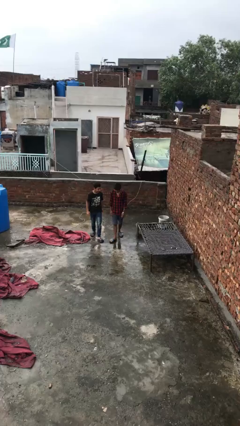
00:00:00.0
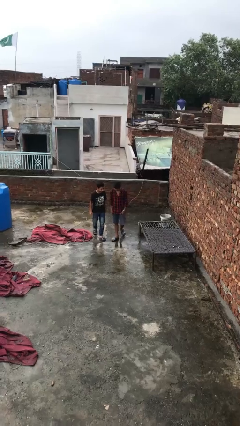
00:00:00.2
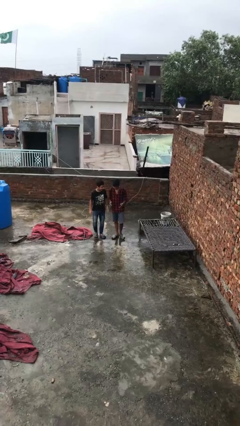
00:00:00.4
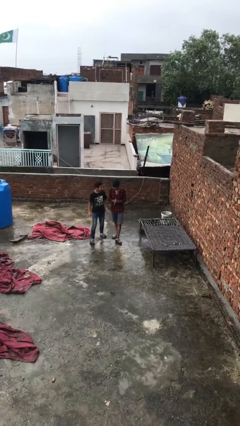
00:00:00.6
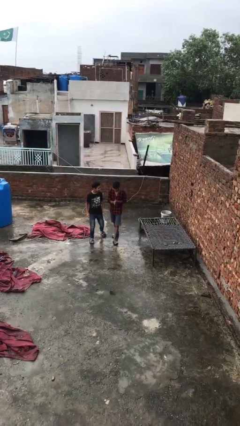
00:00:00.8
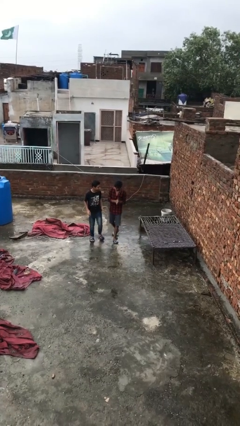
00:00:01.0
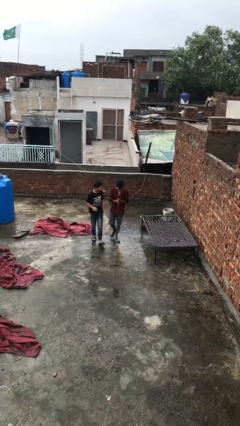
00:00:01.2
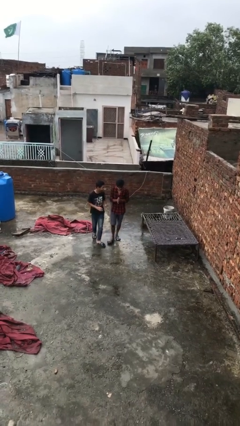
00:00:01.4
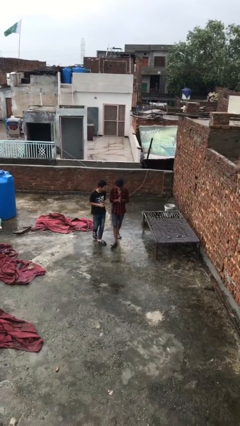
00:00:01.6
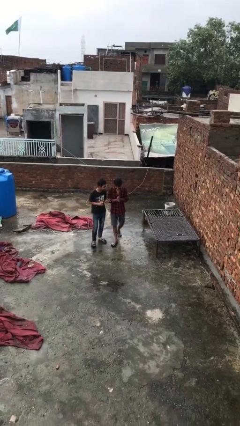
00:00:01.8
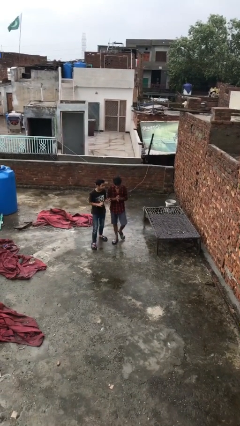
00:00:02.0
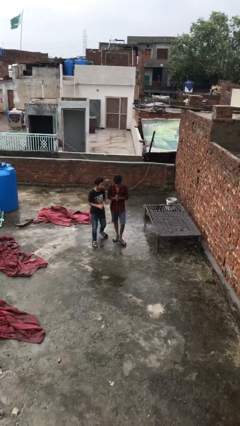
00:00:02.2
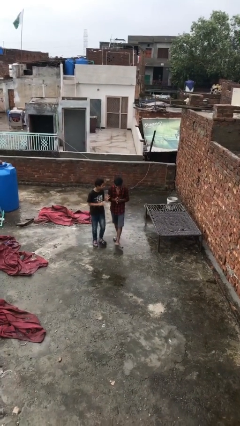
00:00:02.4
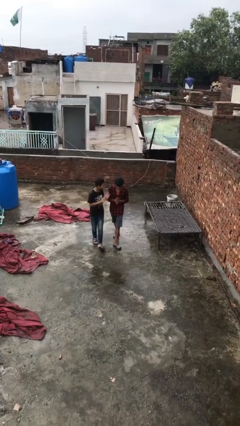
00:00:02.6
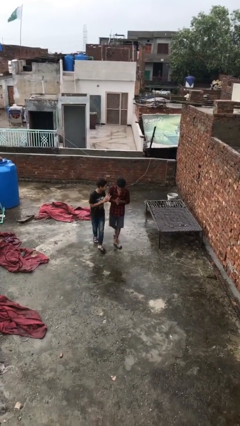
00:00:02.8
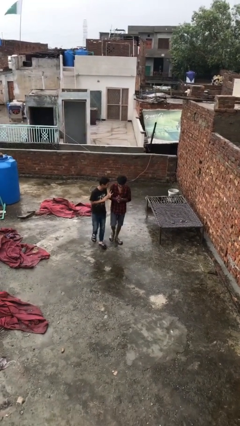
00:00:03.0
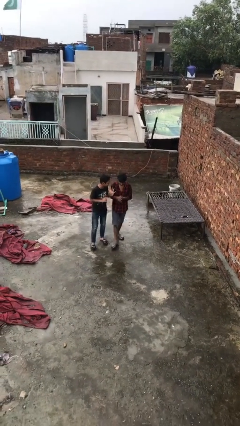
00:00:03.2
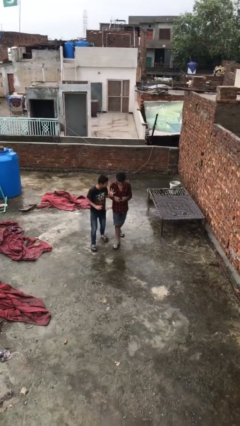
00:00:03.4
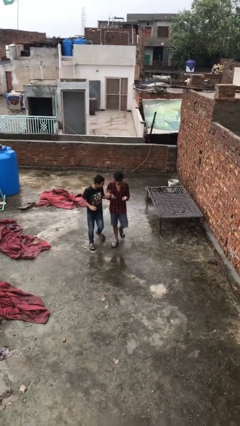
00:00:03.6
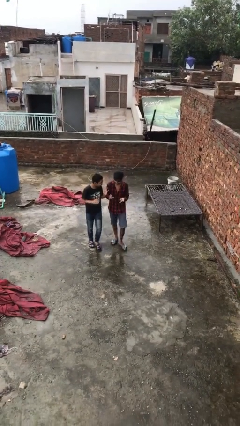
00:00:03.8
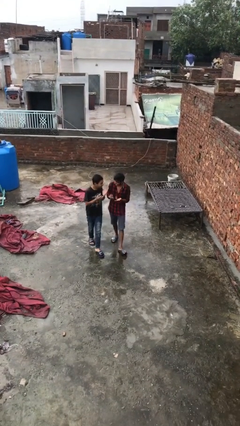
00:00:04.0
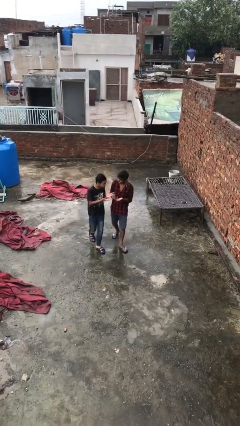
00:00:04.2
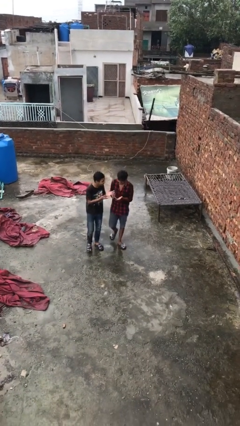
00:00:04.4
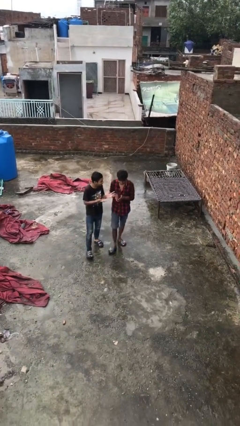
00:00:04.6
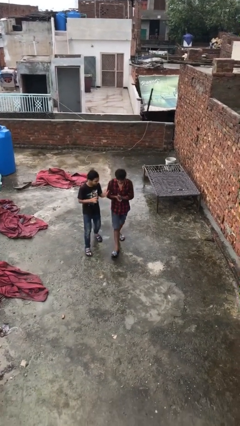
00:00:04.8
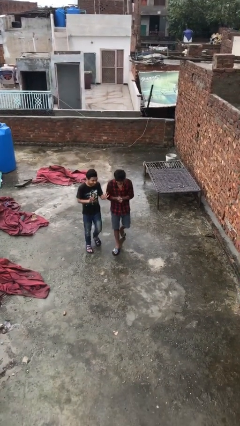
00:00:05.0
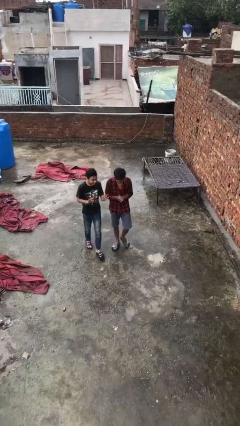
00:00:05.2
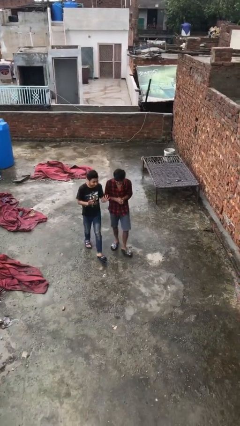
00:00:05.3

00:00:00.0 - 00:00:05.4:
person talks to person

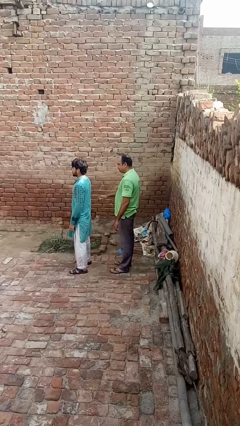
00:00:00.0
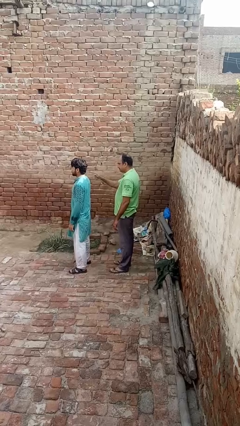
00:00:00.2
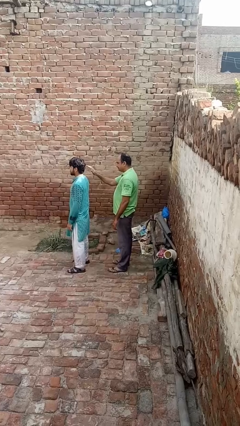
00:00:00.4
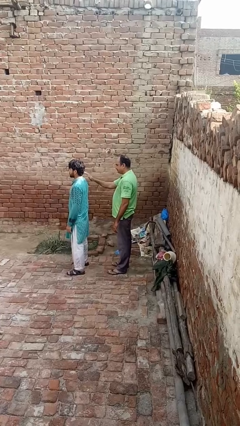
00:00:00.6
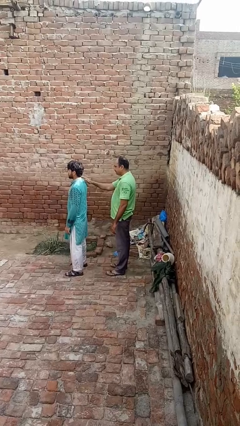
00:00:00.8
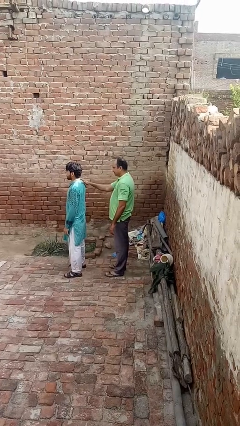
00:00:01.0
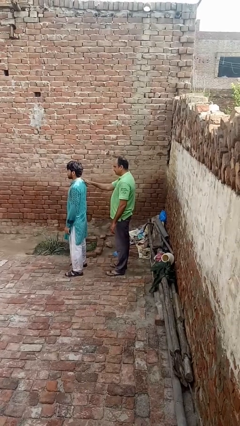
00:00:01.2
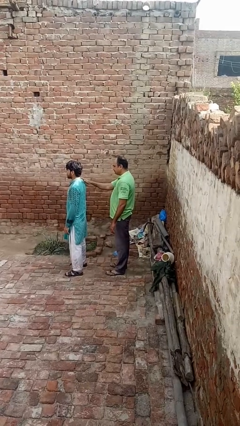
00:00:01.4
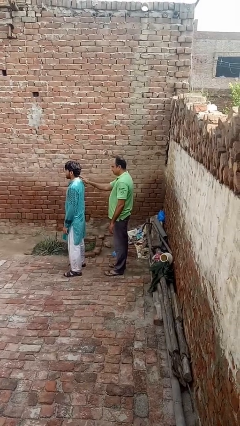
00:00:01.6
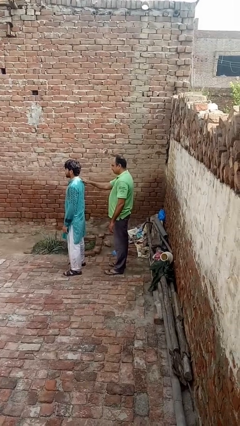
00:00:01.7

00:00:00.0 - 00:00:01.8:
person touches back of person

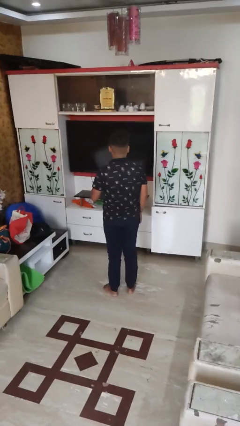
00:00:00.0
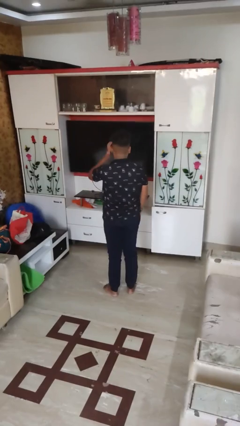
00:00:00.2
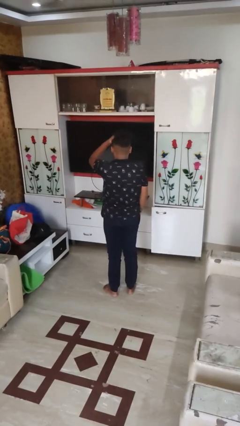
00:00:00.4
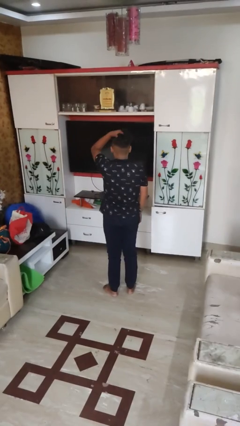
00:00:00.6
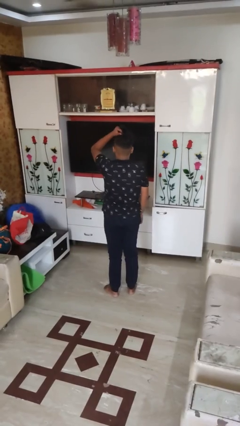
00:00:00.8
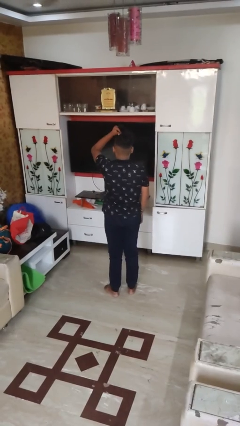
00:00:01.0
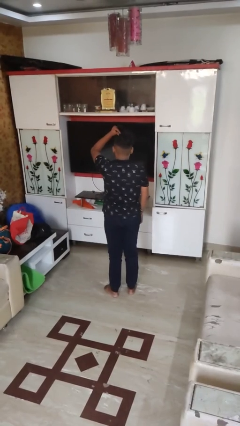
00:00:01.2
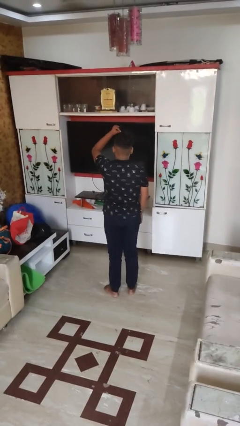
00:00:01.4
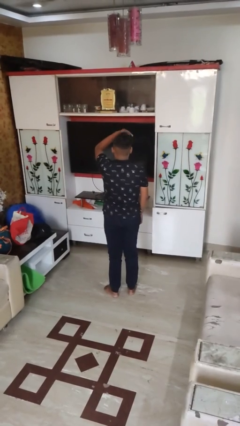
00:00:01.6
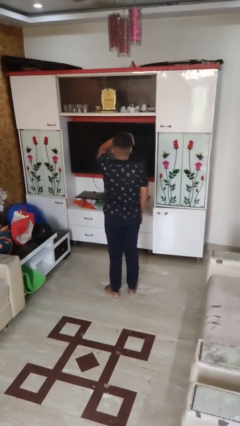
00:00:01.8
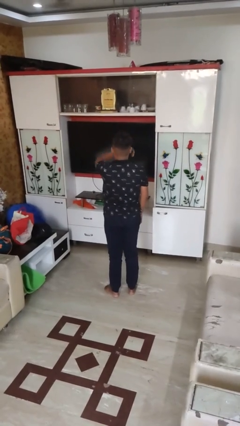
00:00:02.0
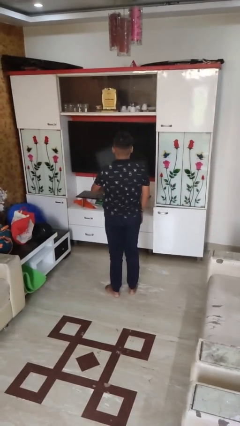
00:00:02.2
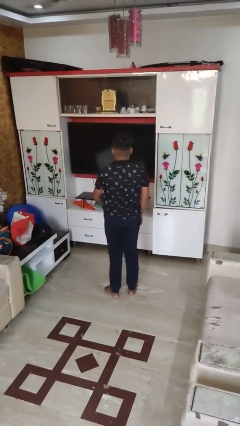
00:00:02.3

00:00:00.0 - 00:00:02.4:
person strokes hair

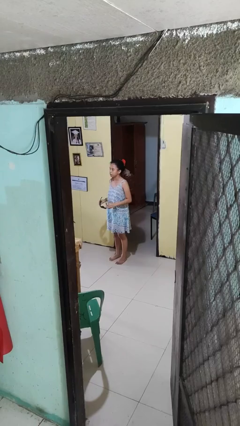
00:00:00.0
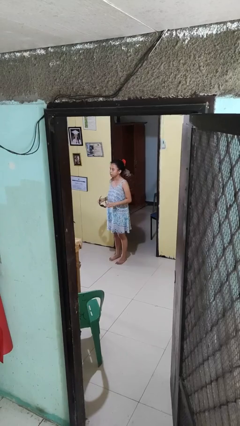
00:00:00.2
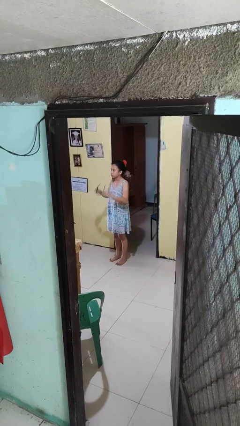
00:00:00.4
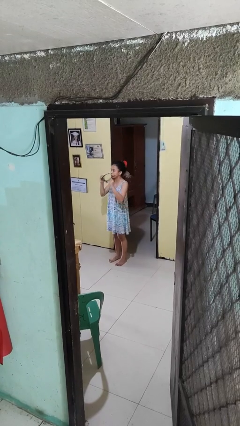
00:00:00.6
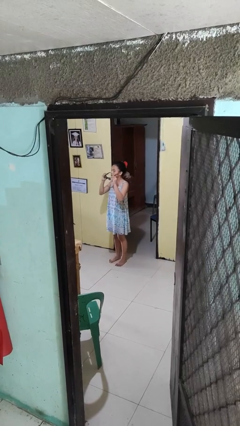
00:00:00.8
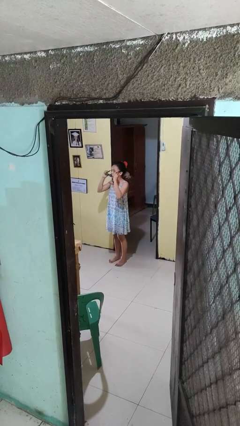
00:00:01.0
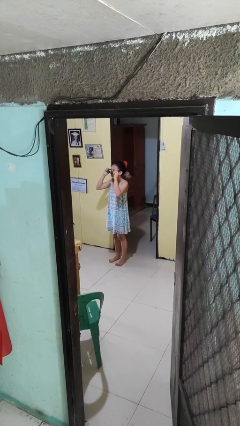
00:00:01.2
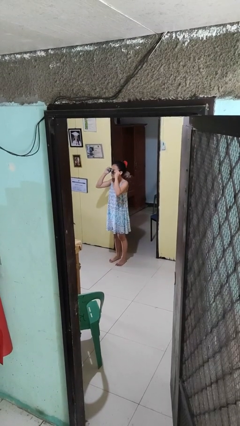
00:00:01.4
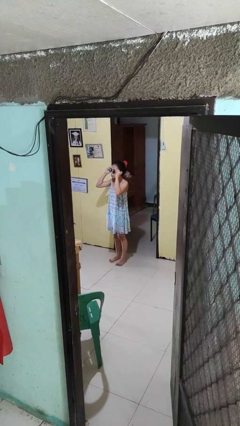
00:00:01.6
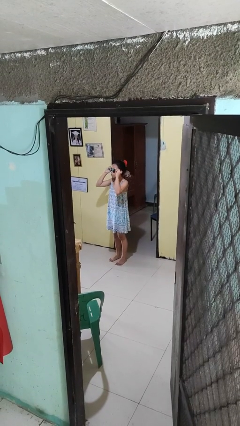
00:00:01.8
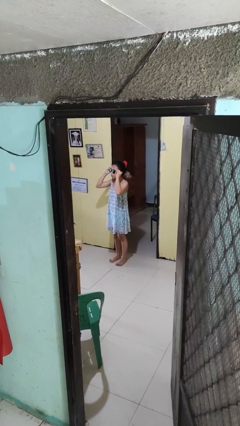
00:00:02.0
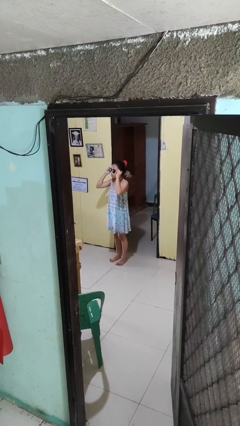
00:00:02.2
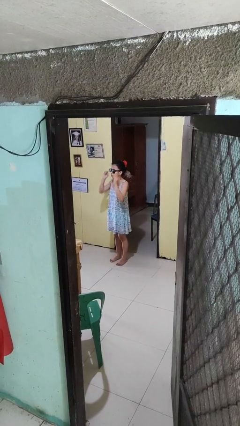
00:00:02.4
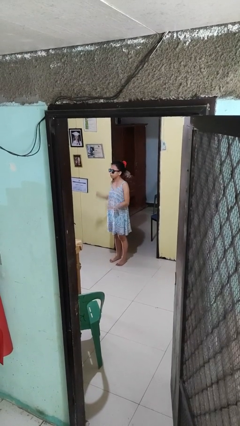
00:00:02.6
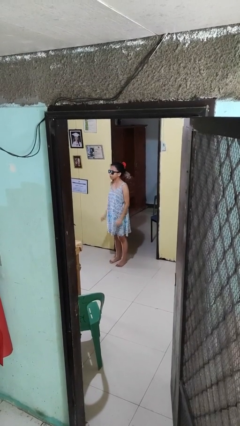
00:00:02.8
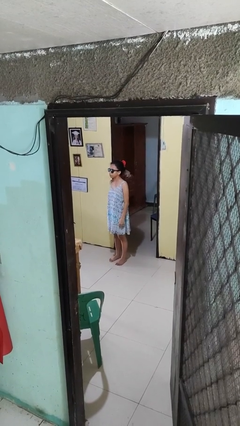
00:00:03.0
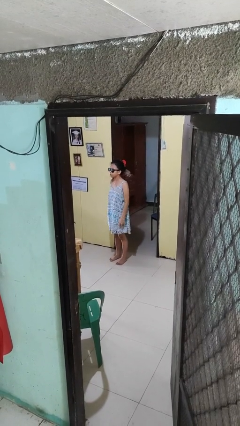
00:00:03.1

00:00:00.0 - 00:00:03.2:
person puts on sunglasses

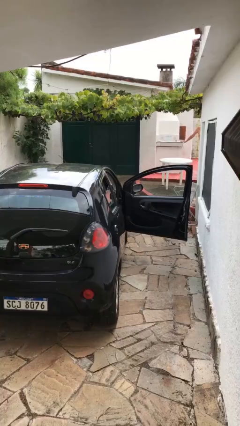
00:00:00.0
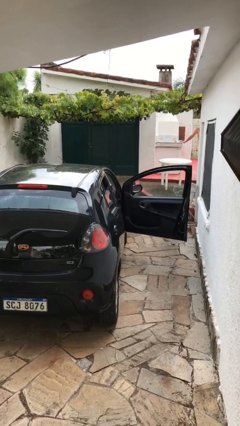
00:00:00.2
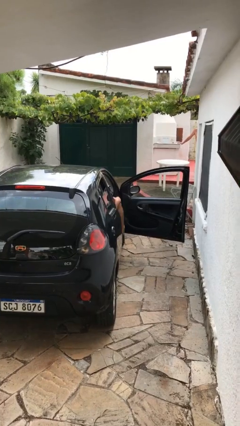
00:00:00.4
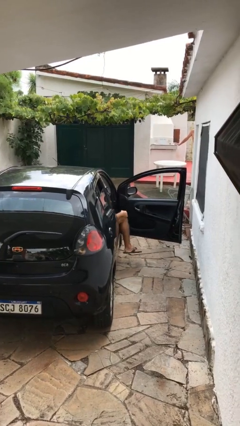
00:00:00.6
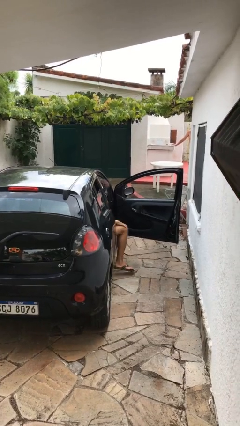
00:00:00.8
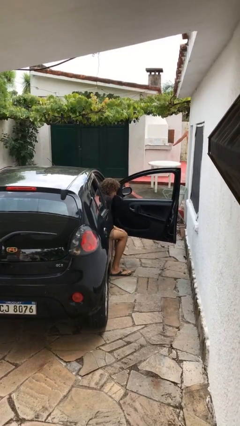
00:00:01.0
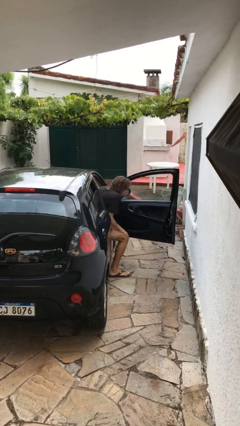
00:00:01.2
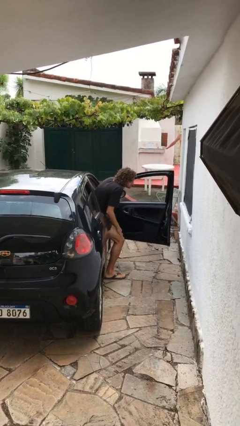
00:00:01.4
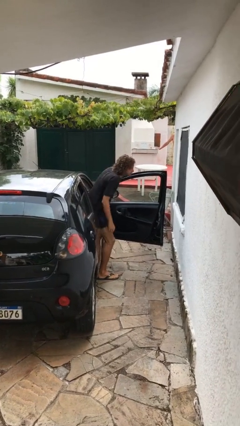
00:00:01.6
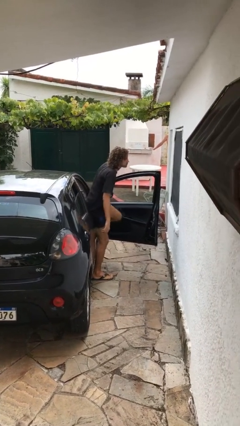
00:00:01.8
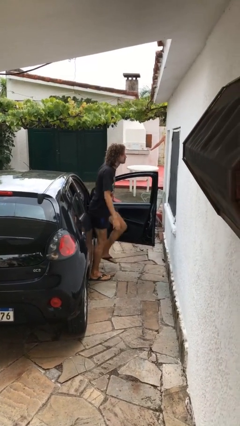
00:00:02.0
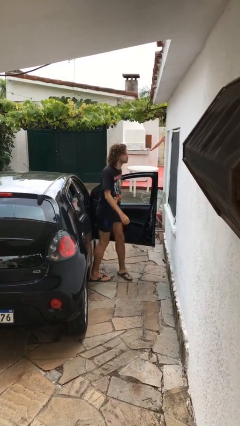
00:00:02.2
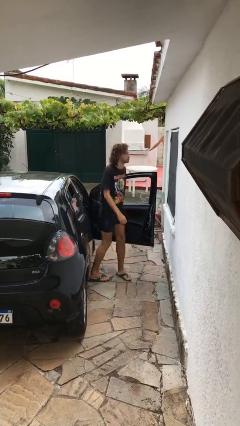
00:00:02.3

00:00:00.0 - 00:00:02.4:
person exits car

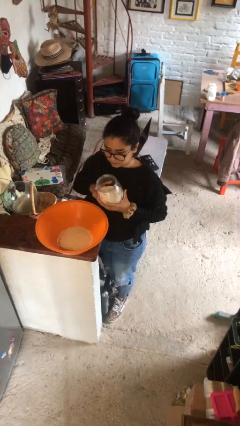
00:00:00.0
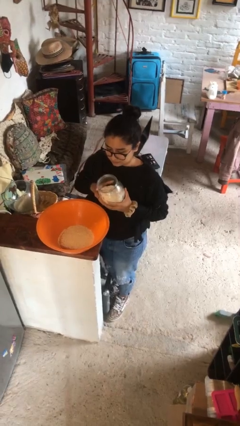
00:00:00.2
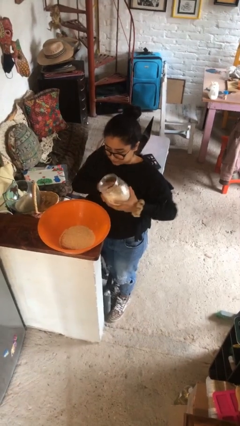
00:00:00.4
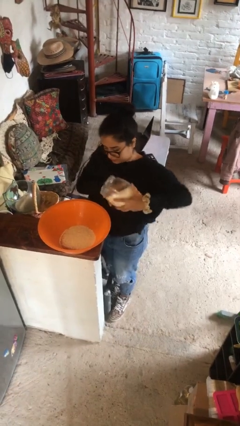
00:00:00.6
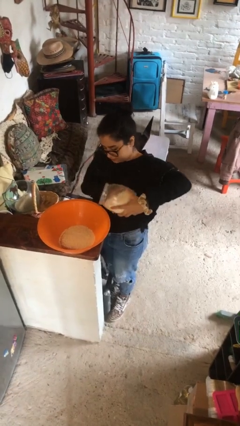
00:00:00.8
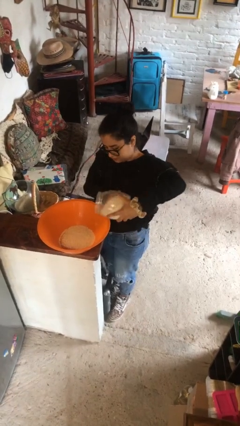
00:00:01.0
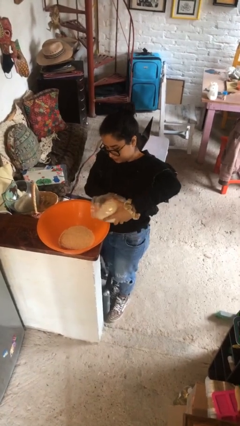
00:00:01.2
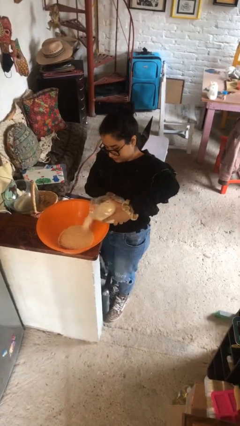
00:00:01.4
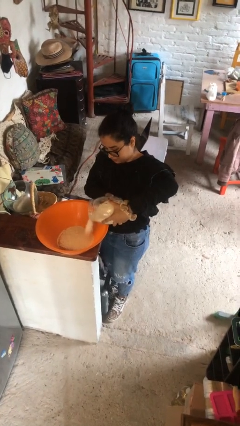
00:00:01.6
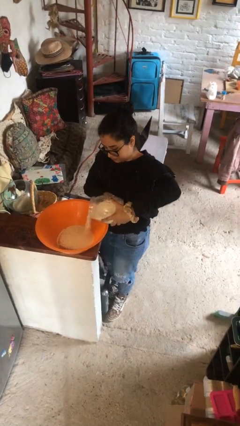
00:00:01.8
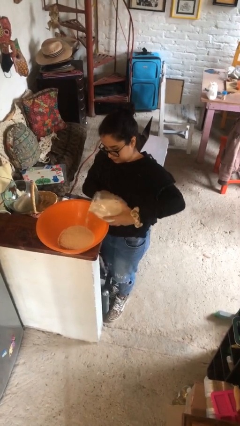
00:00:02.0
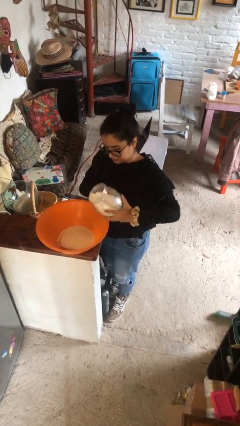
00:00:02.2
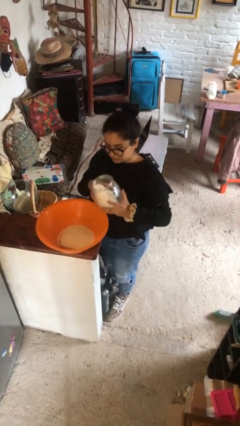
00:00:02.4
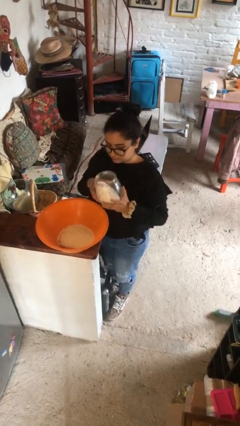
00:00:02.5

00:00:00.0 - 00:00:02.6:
person pours into bowl
